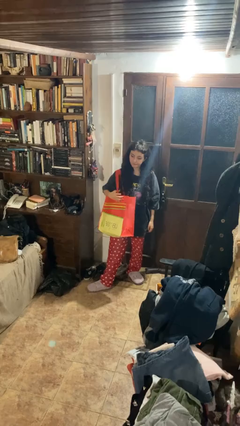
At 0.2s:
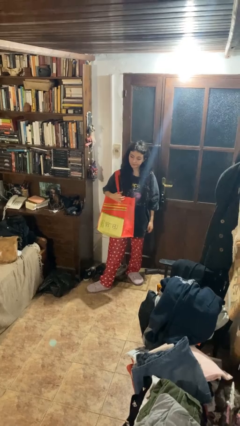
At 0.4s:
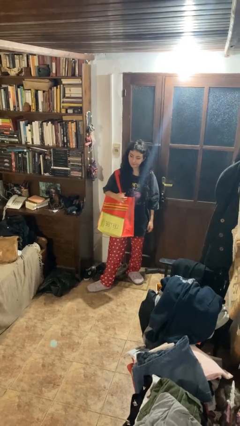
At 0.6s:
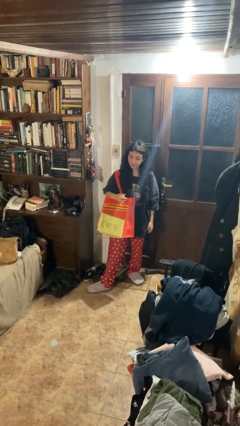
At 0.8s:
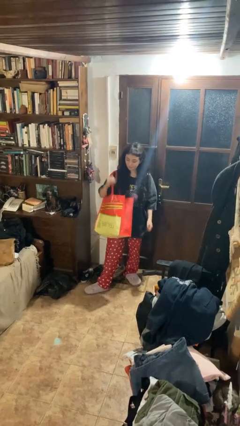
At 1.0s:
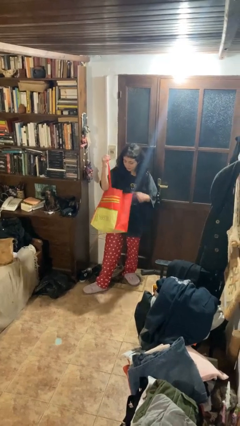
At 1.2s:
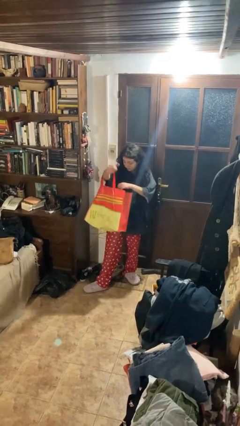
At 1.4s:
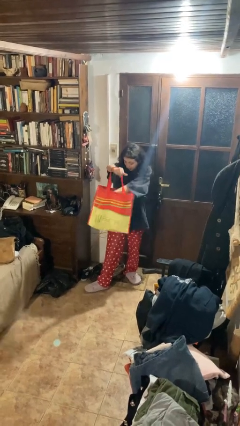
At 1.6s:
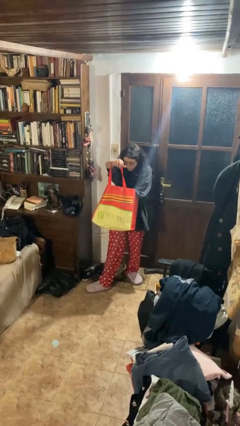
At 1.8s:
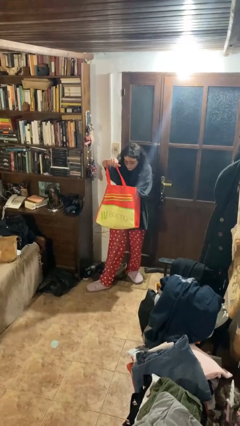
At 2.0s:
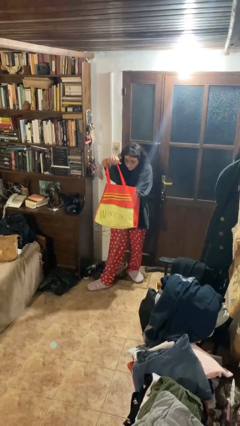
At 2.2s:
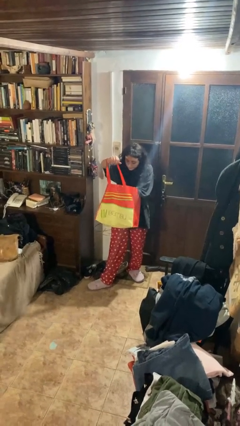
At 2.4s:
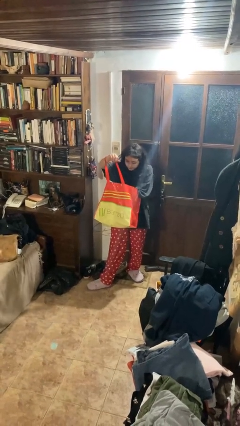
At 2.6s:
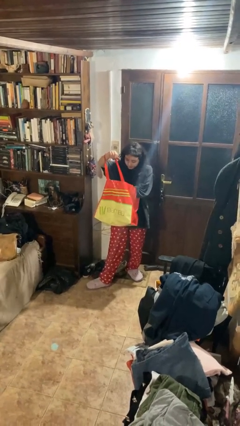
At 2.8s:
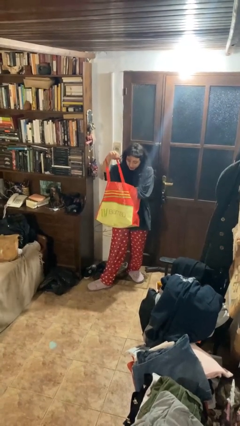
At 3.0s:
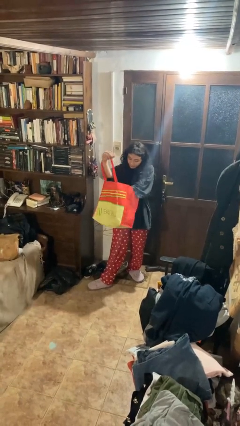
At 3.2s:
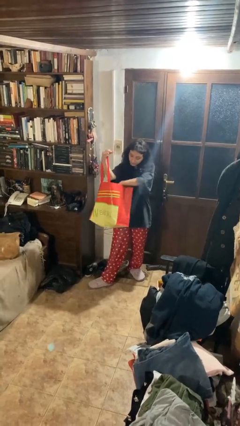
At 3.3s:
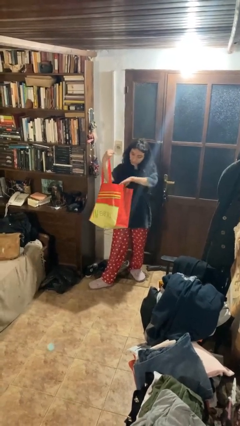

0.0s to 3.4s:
person searches in bag

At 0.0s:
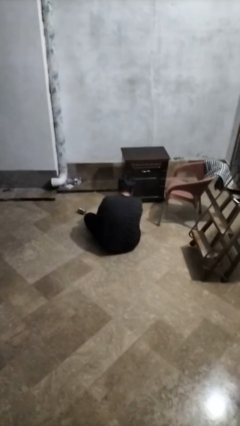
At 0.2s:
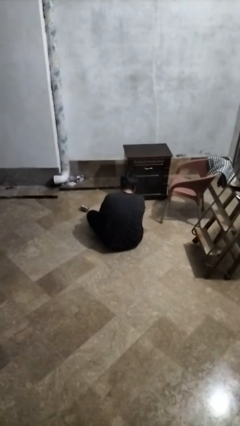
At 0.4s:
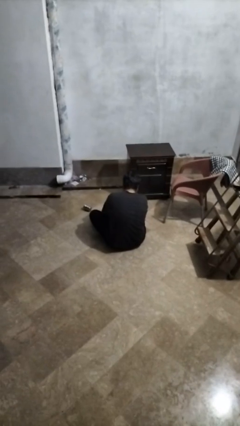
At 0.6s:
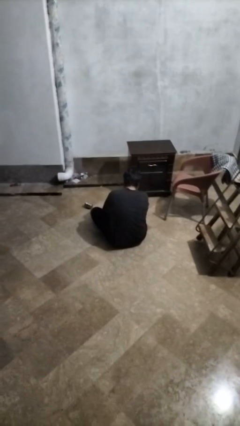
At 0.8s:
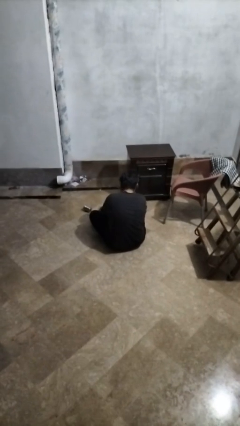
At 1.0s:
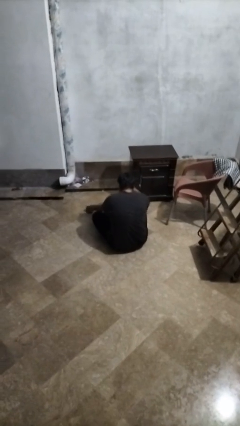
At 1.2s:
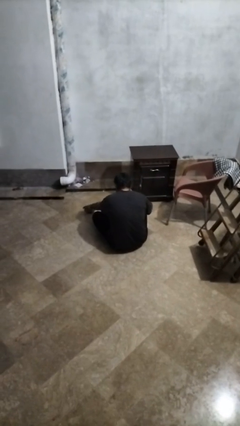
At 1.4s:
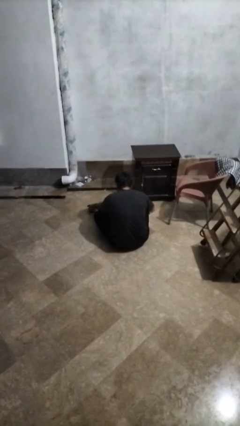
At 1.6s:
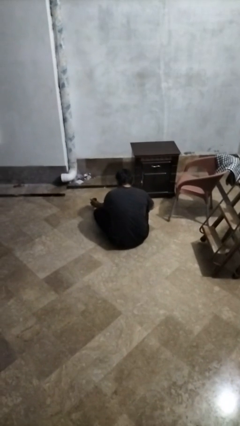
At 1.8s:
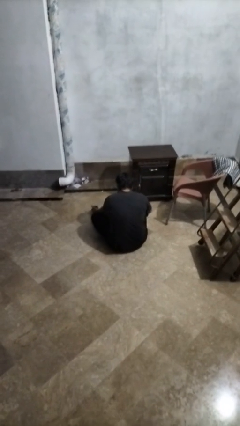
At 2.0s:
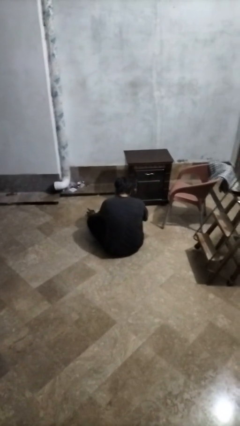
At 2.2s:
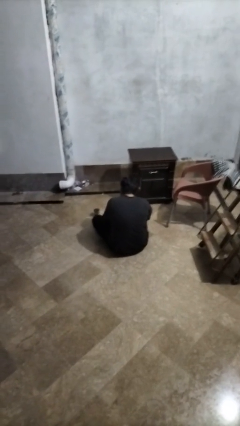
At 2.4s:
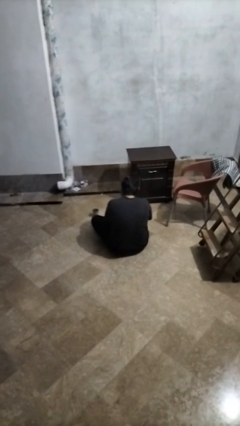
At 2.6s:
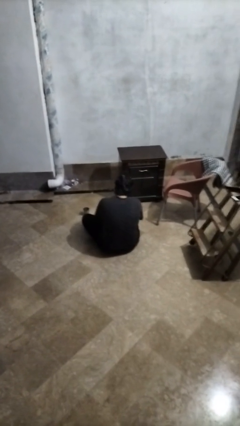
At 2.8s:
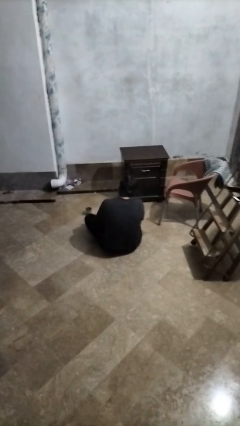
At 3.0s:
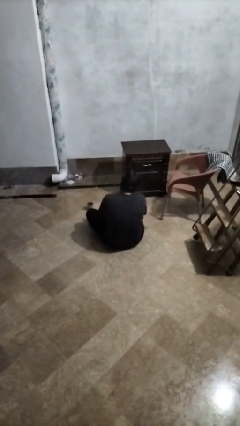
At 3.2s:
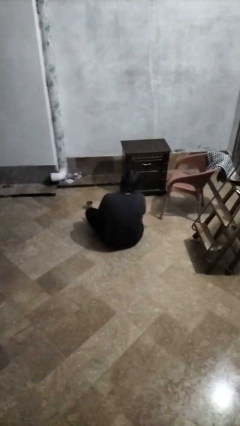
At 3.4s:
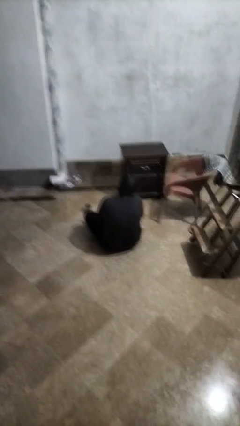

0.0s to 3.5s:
person sets upright glass

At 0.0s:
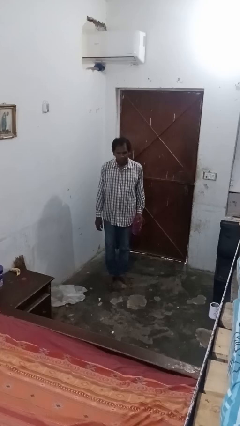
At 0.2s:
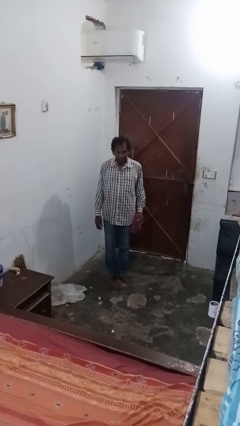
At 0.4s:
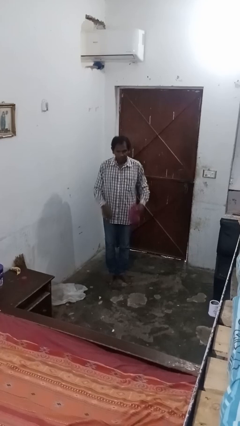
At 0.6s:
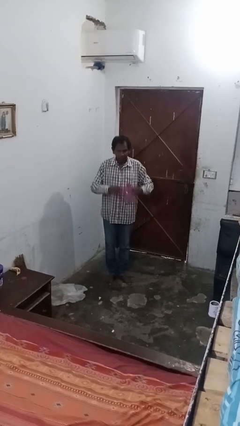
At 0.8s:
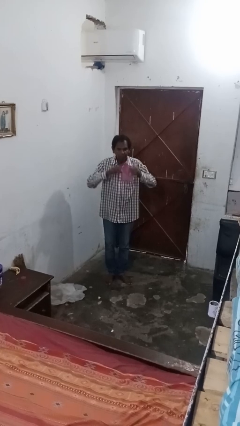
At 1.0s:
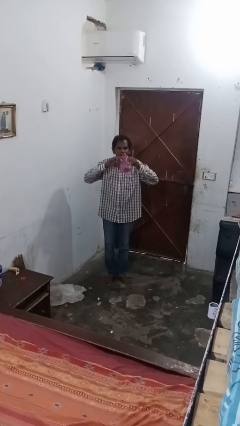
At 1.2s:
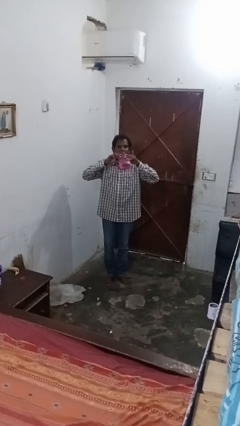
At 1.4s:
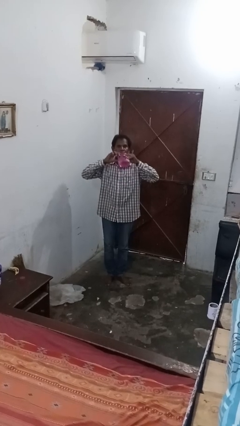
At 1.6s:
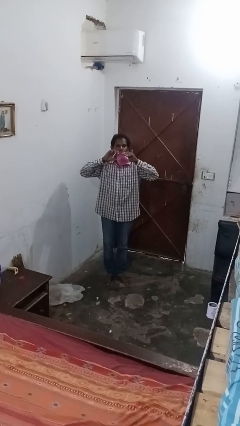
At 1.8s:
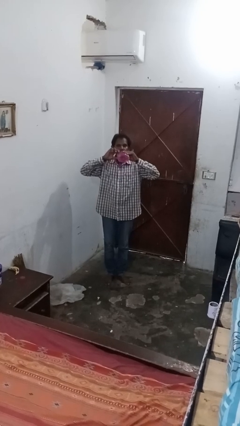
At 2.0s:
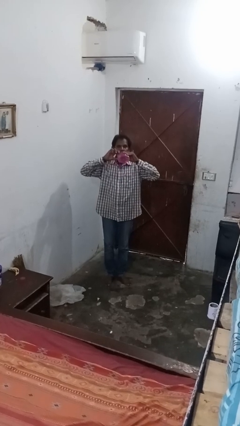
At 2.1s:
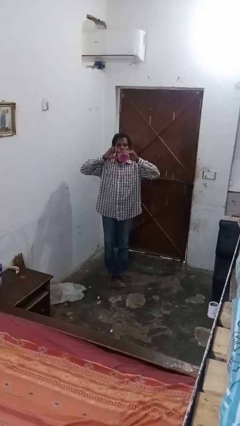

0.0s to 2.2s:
person drinks from bottle

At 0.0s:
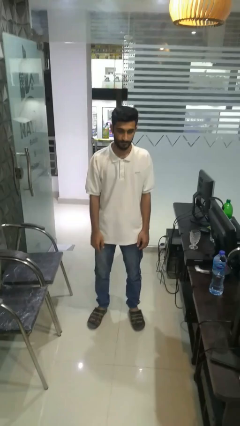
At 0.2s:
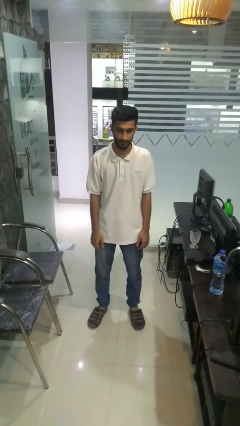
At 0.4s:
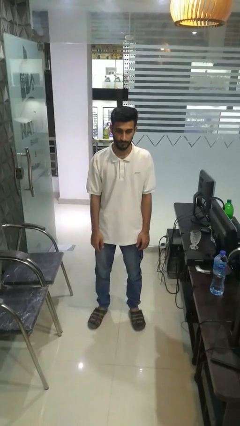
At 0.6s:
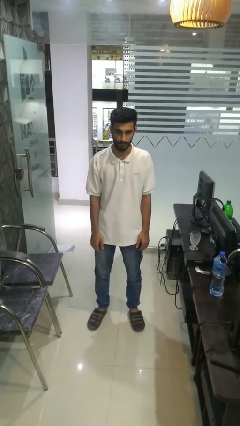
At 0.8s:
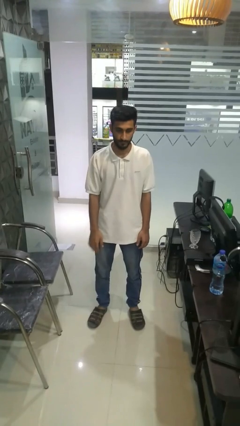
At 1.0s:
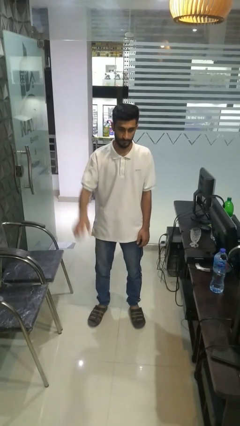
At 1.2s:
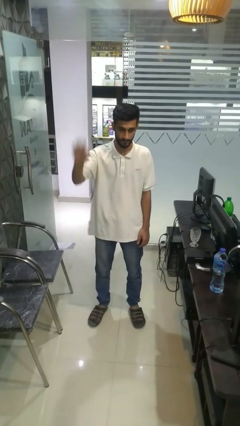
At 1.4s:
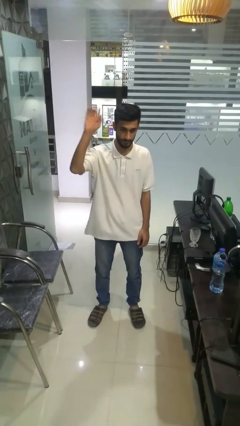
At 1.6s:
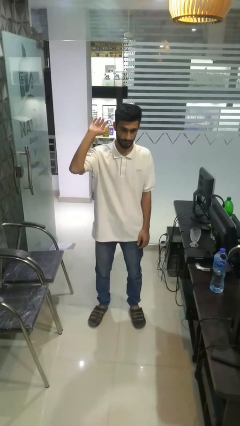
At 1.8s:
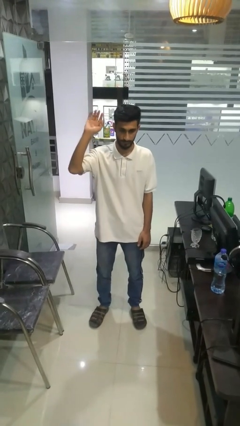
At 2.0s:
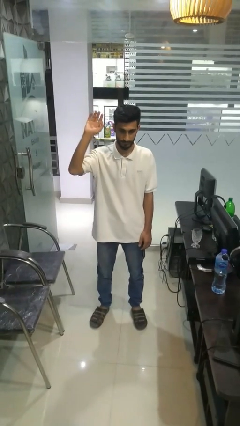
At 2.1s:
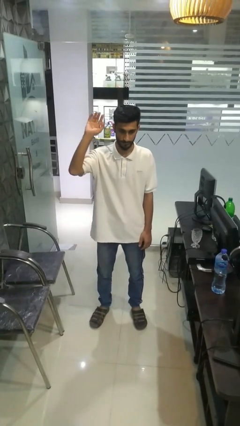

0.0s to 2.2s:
person gestures raise hand

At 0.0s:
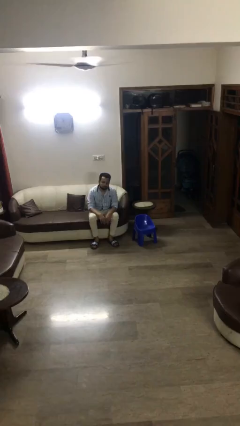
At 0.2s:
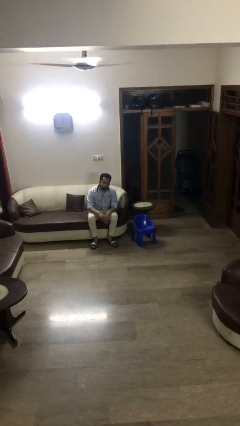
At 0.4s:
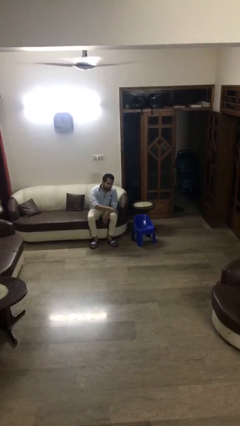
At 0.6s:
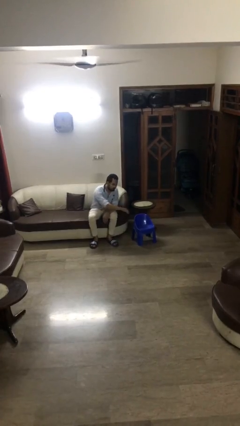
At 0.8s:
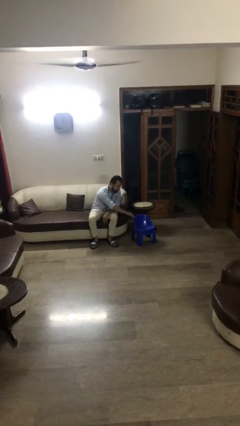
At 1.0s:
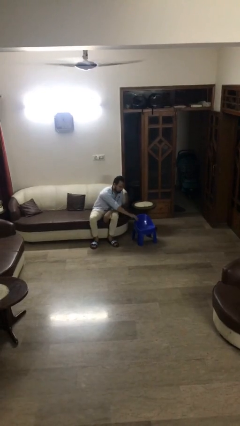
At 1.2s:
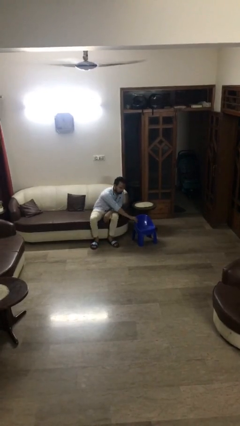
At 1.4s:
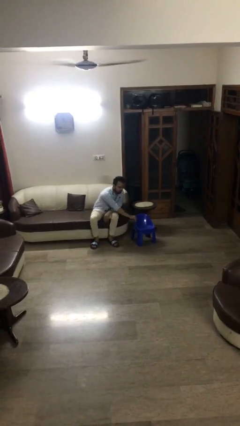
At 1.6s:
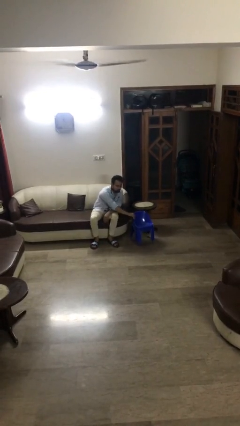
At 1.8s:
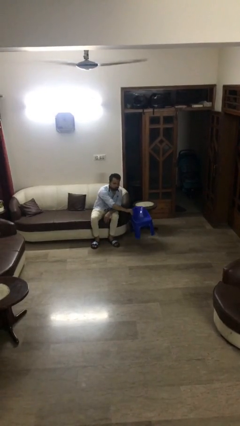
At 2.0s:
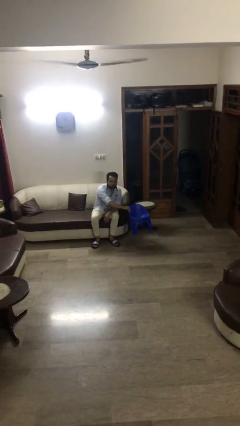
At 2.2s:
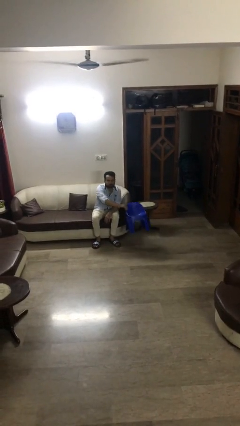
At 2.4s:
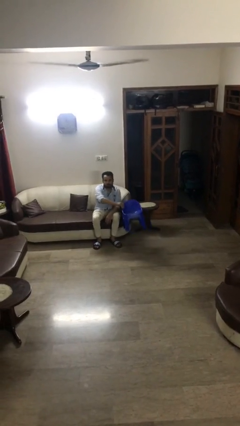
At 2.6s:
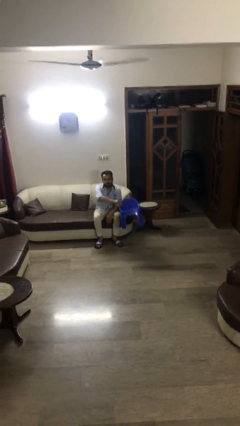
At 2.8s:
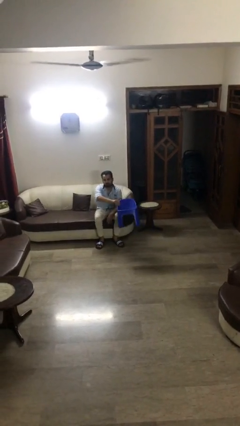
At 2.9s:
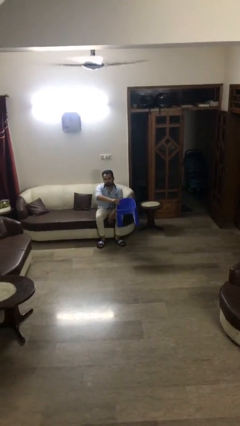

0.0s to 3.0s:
person picks up object from floor

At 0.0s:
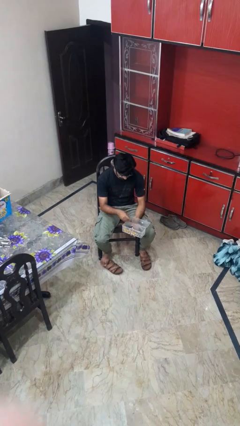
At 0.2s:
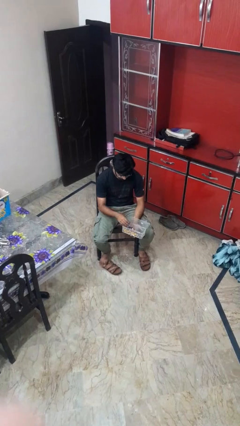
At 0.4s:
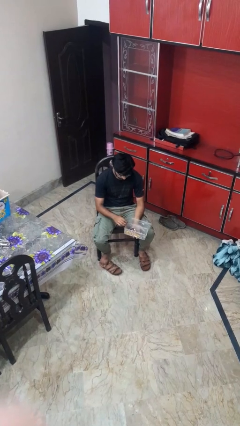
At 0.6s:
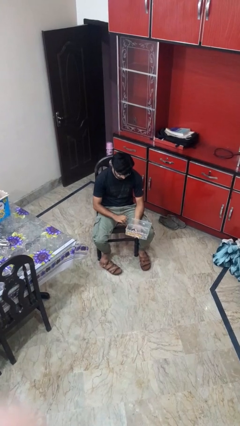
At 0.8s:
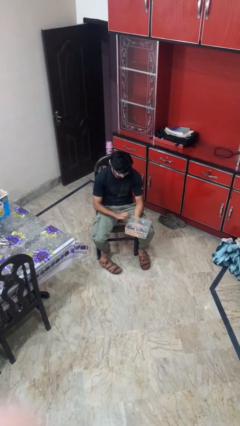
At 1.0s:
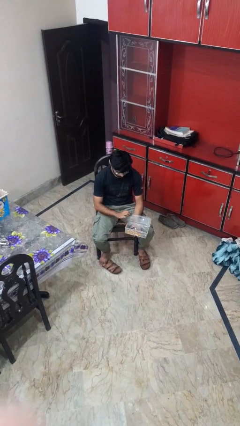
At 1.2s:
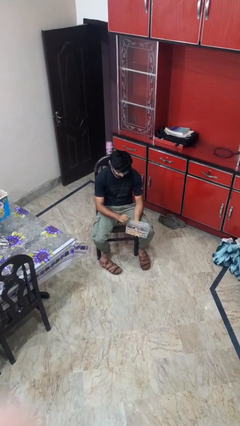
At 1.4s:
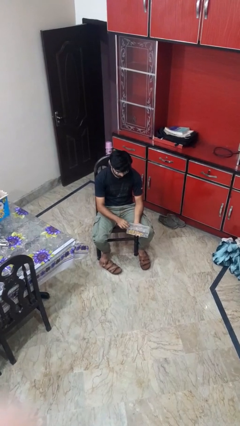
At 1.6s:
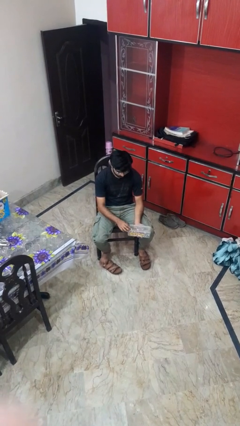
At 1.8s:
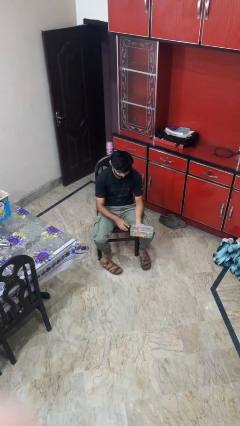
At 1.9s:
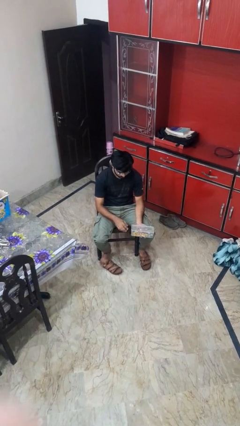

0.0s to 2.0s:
person closes jewelry box

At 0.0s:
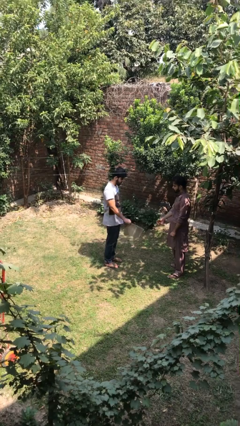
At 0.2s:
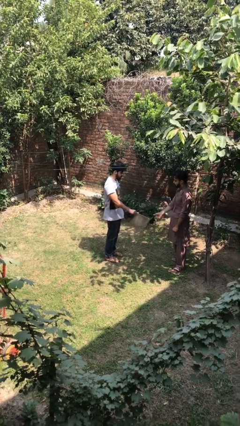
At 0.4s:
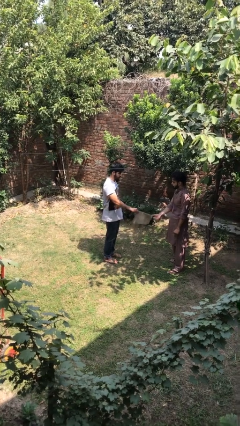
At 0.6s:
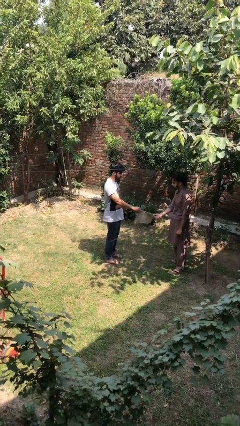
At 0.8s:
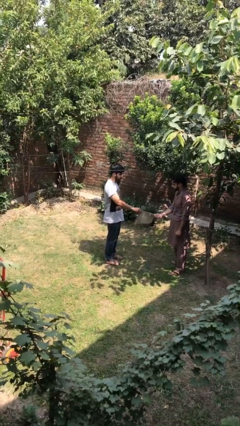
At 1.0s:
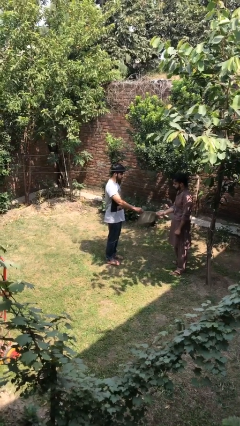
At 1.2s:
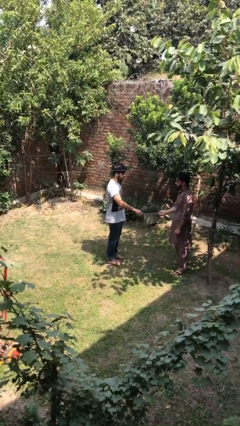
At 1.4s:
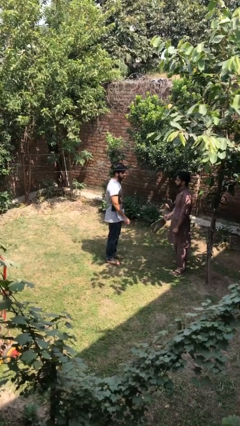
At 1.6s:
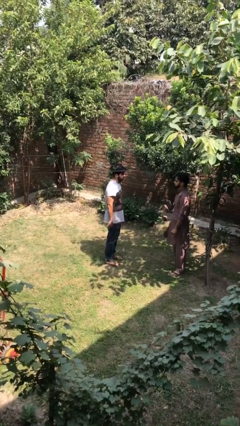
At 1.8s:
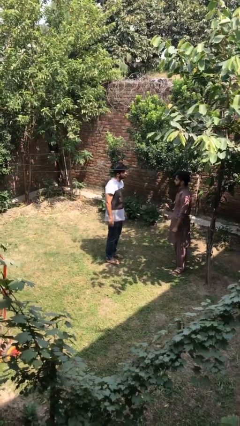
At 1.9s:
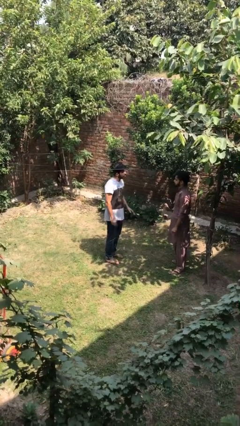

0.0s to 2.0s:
person transfers object to person
